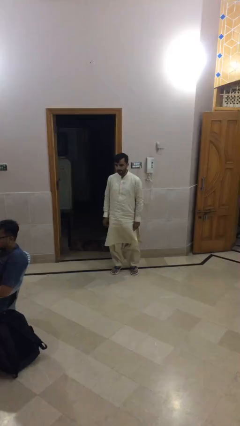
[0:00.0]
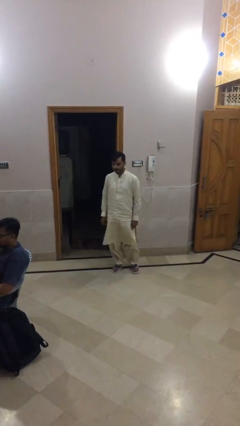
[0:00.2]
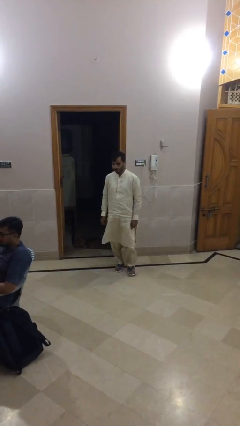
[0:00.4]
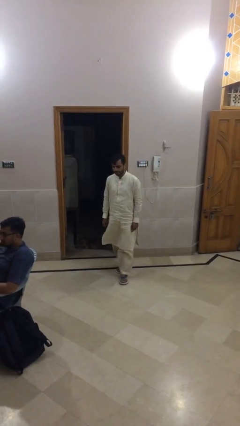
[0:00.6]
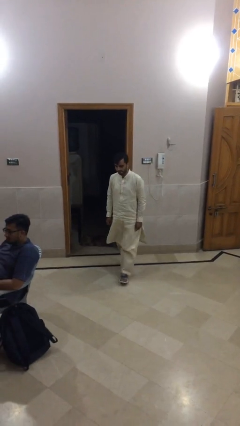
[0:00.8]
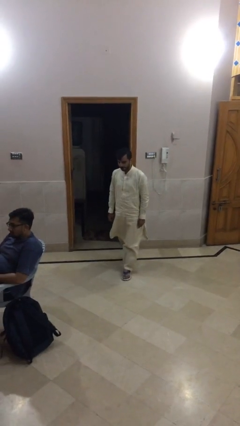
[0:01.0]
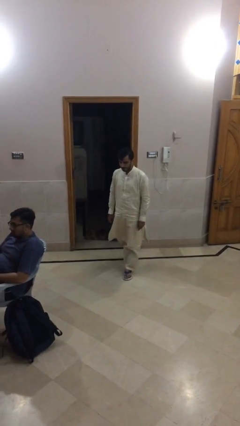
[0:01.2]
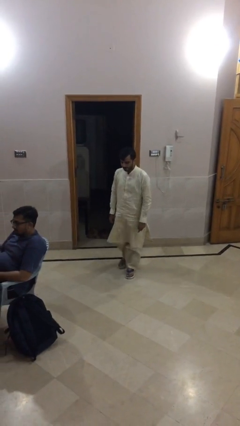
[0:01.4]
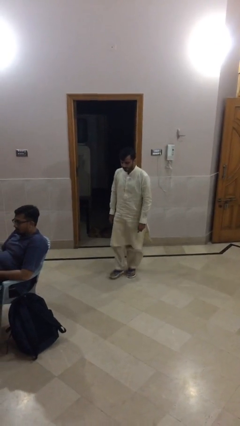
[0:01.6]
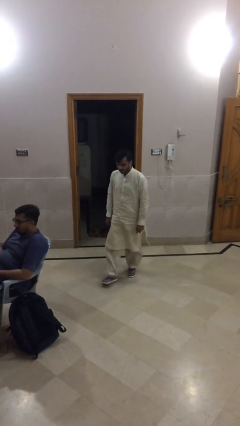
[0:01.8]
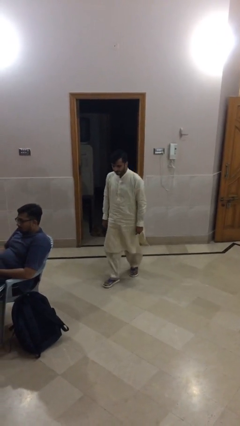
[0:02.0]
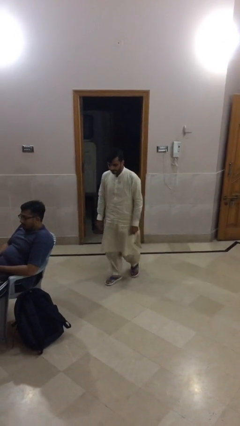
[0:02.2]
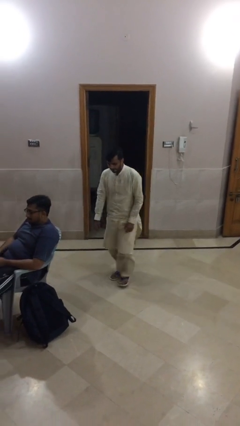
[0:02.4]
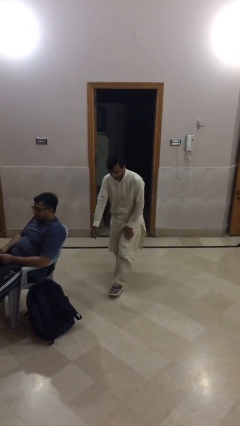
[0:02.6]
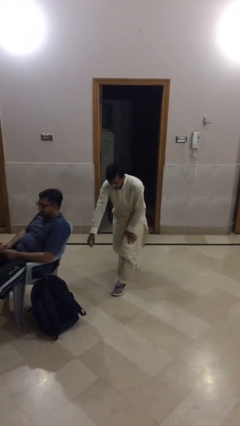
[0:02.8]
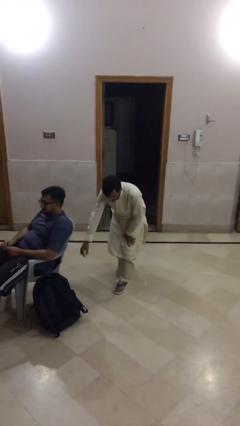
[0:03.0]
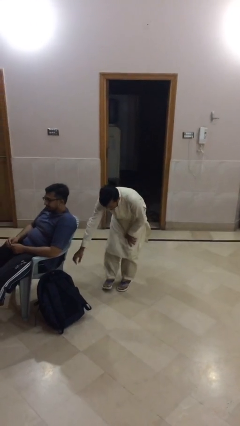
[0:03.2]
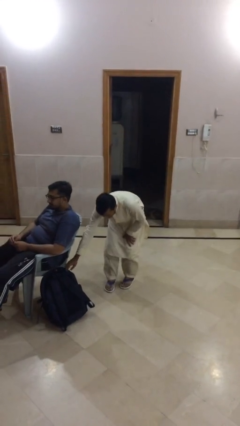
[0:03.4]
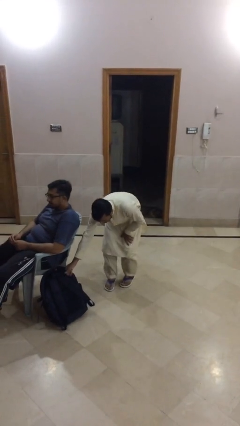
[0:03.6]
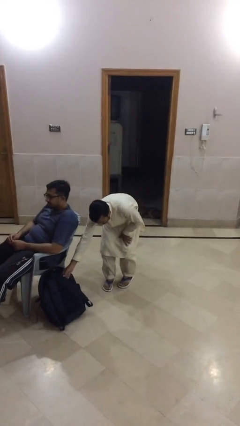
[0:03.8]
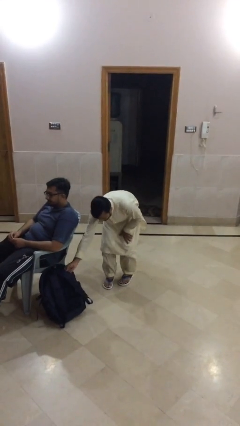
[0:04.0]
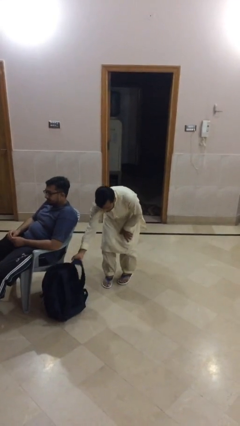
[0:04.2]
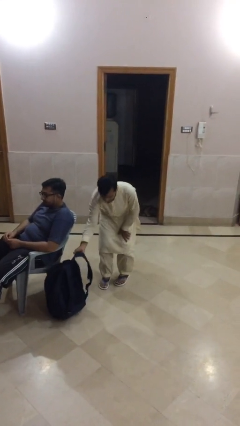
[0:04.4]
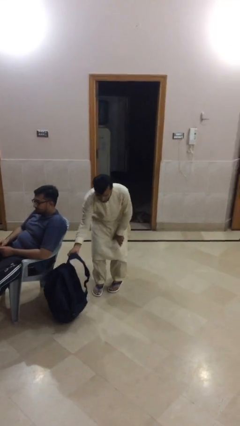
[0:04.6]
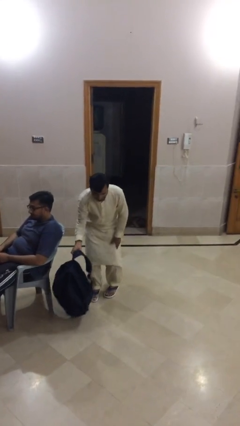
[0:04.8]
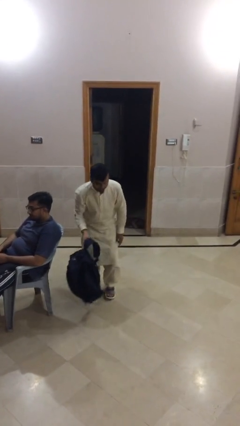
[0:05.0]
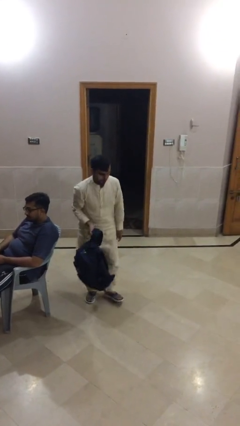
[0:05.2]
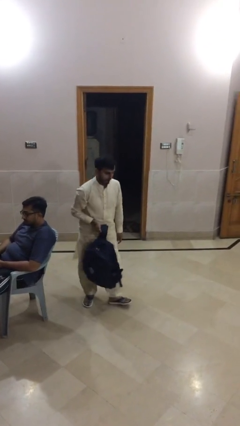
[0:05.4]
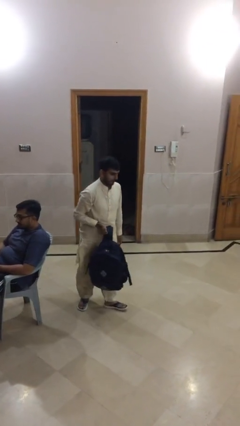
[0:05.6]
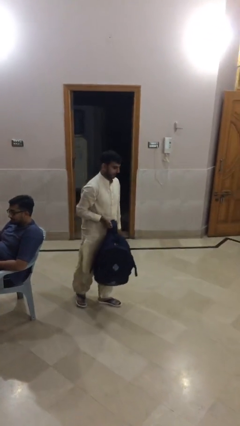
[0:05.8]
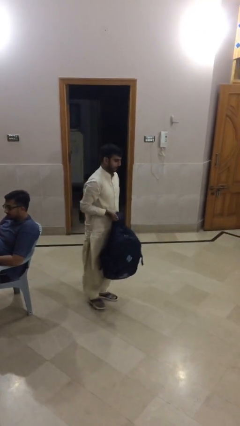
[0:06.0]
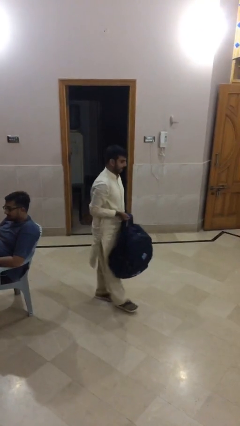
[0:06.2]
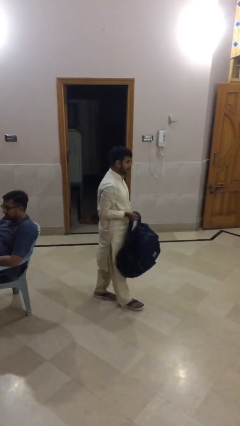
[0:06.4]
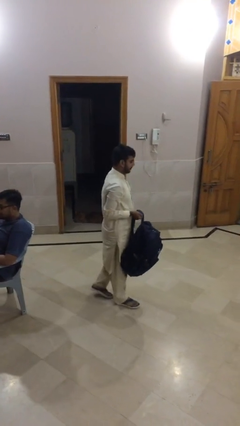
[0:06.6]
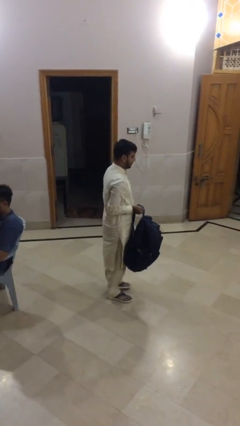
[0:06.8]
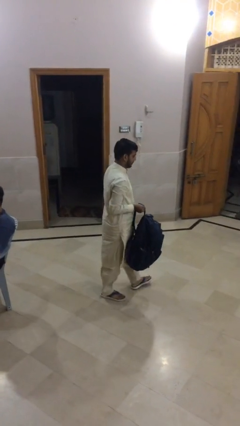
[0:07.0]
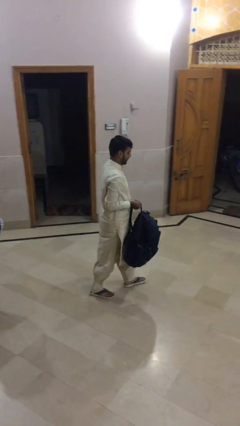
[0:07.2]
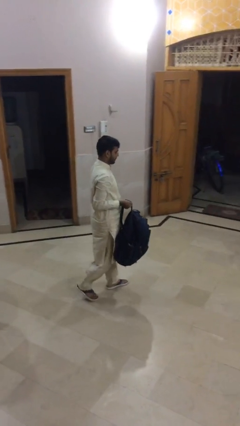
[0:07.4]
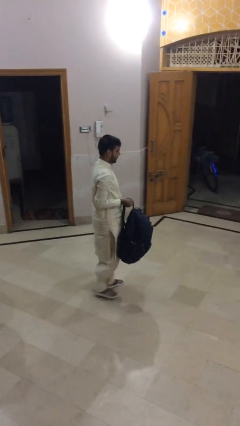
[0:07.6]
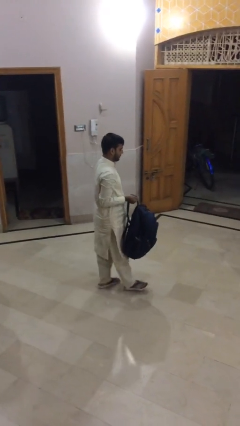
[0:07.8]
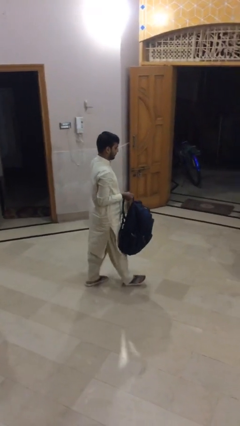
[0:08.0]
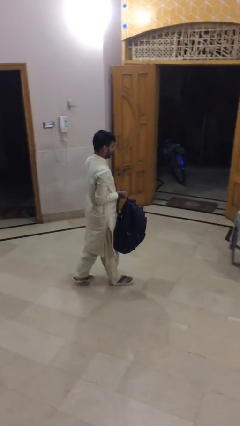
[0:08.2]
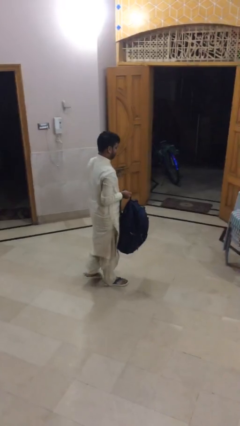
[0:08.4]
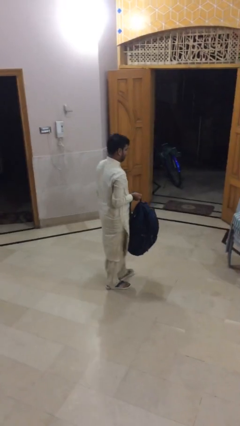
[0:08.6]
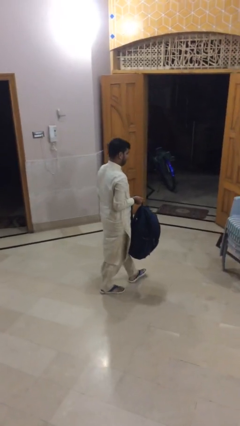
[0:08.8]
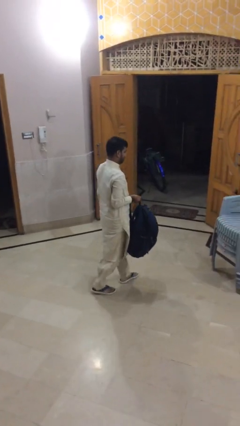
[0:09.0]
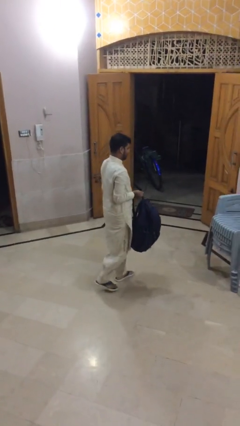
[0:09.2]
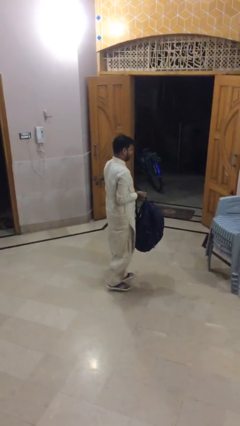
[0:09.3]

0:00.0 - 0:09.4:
person steals object from person

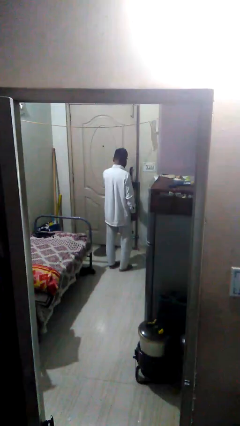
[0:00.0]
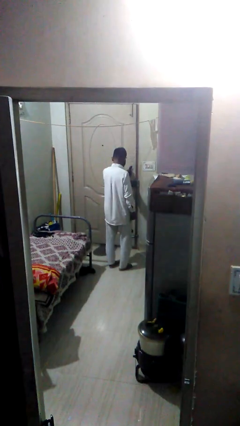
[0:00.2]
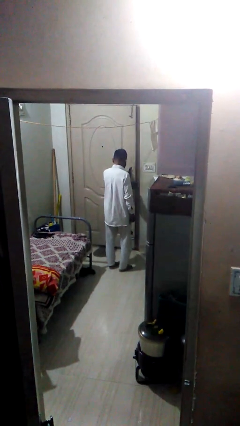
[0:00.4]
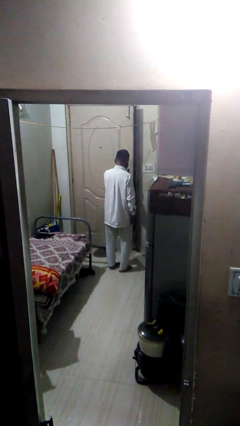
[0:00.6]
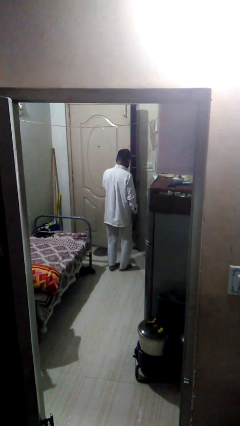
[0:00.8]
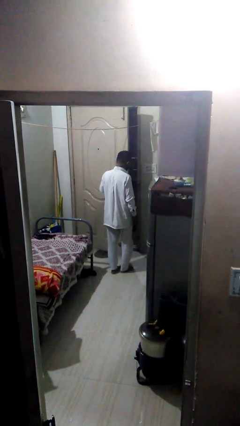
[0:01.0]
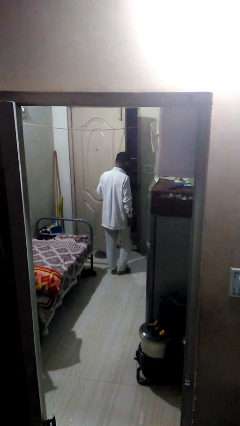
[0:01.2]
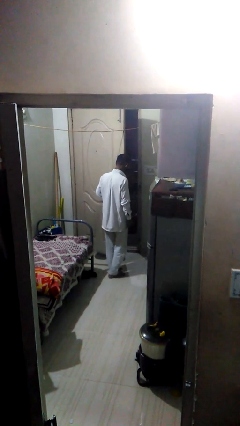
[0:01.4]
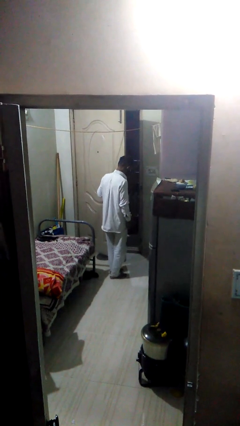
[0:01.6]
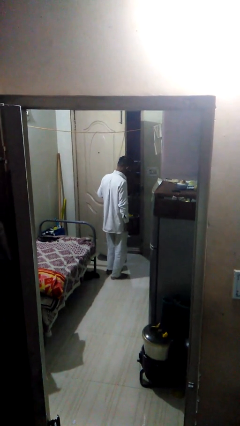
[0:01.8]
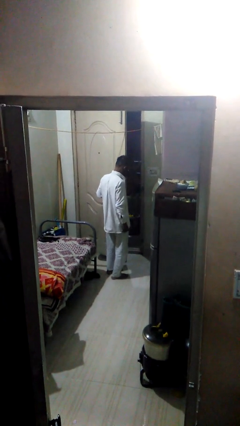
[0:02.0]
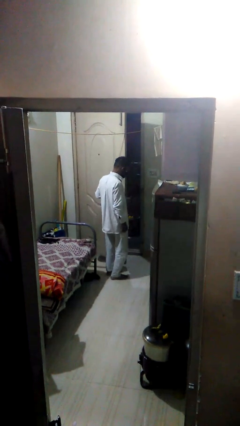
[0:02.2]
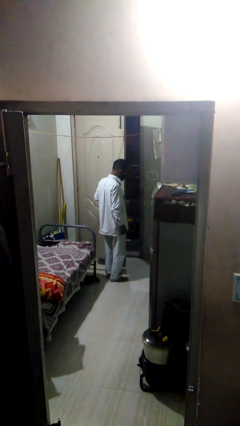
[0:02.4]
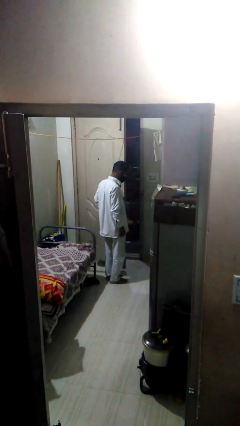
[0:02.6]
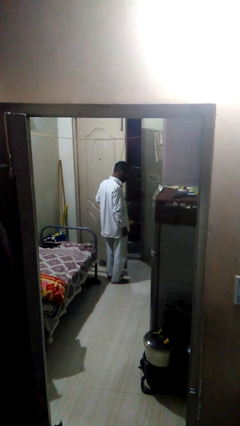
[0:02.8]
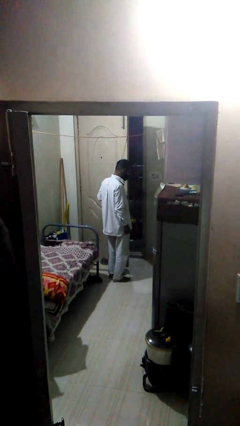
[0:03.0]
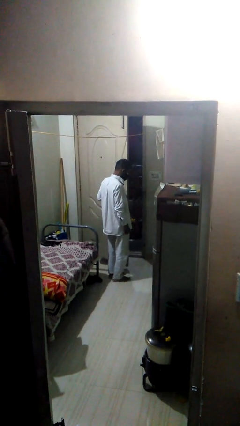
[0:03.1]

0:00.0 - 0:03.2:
person opens facility door

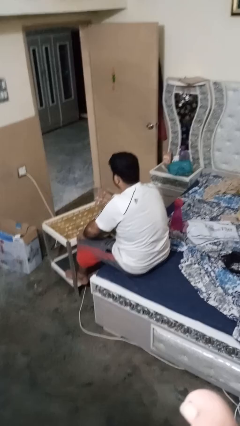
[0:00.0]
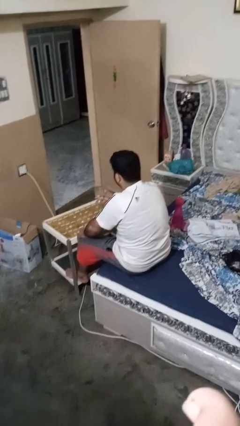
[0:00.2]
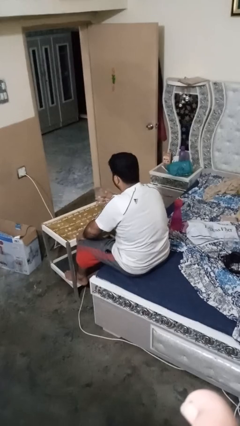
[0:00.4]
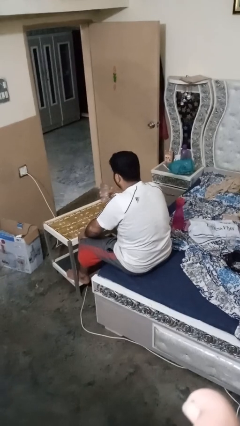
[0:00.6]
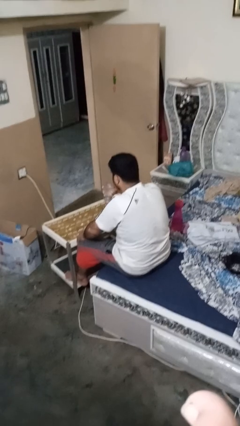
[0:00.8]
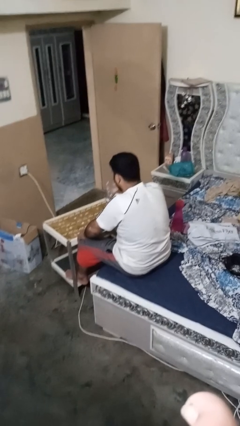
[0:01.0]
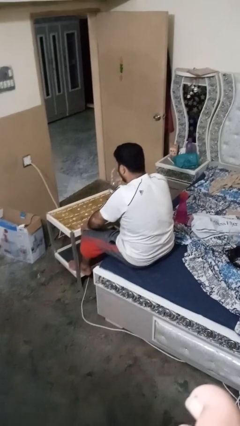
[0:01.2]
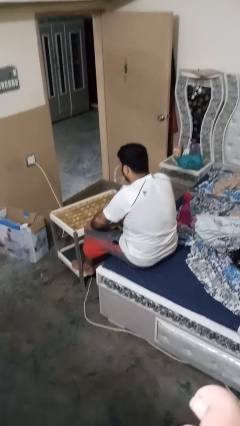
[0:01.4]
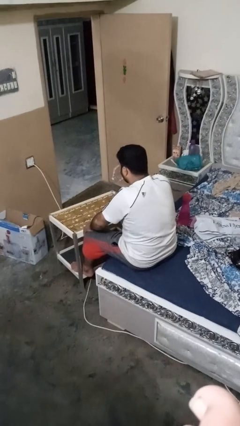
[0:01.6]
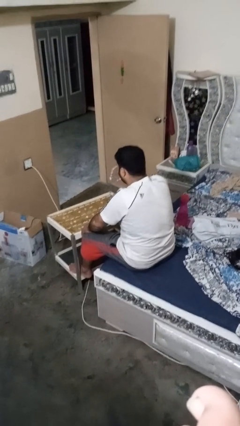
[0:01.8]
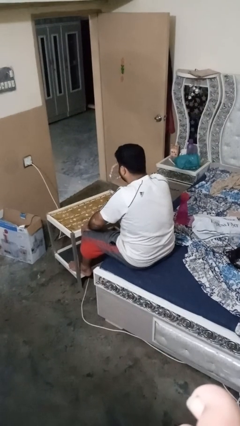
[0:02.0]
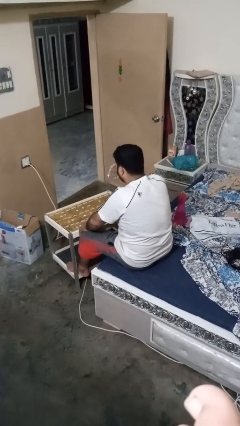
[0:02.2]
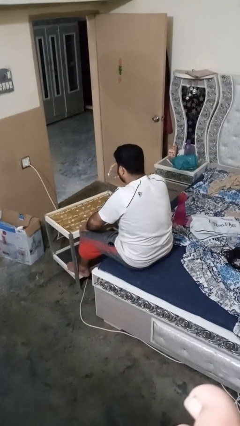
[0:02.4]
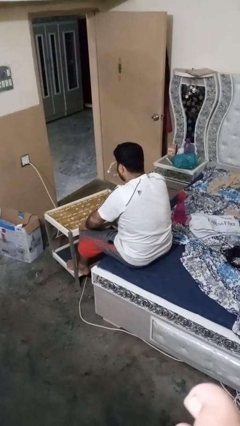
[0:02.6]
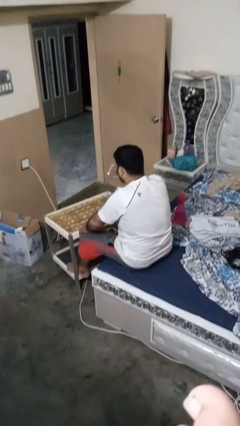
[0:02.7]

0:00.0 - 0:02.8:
person drinks from shotglass

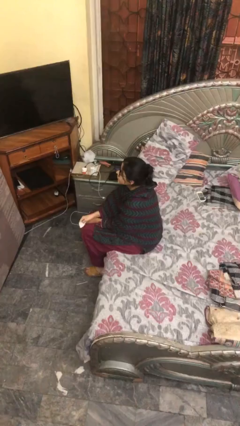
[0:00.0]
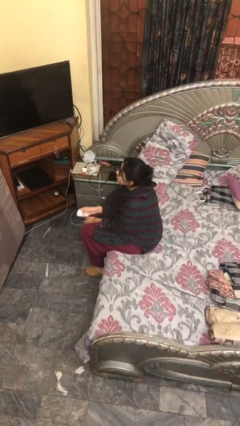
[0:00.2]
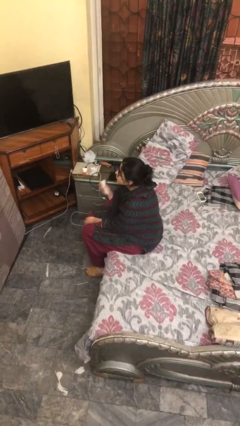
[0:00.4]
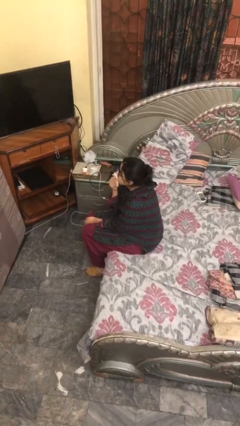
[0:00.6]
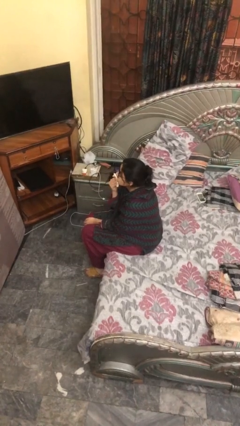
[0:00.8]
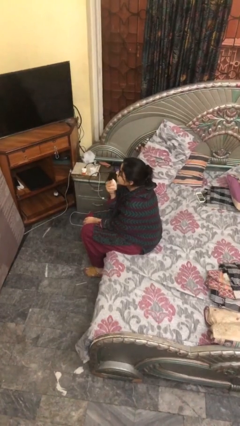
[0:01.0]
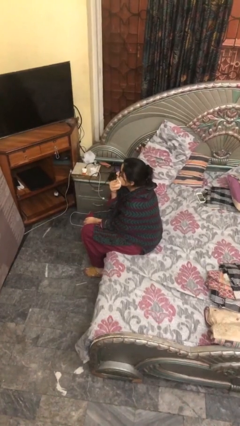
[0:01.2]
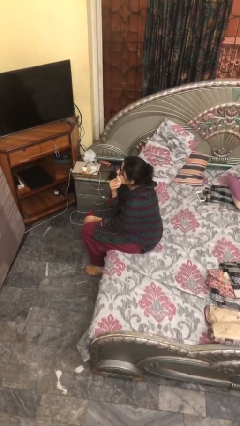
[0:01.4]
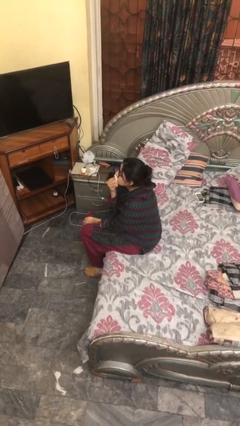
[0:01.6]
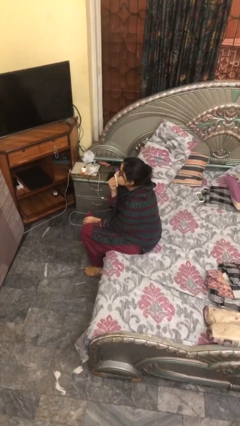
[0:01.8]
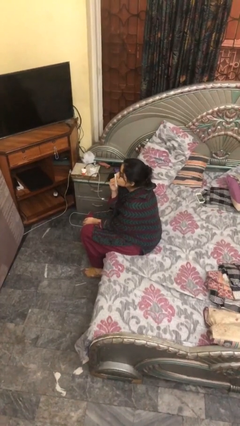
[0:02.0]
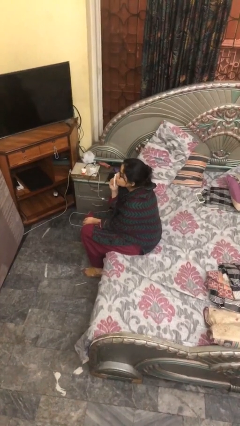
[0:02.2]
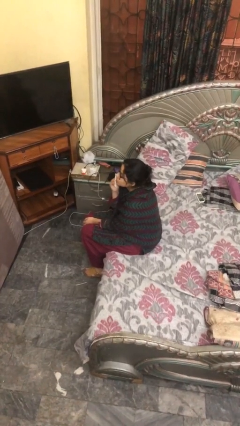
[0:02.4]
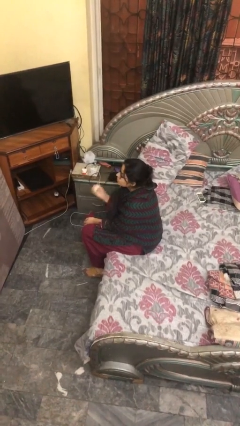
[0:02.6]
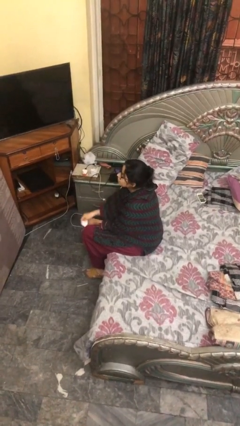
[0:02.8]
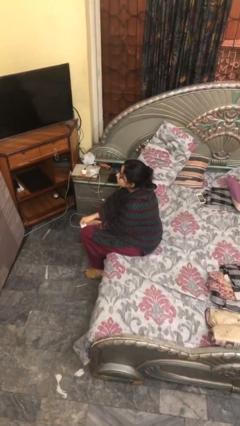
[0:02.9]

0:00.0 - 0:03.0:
person wipes mouth with napkin
